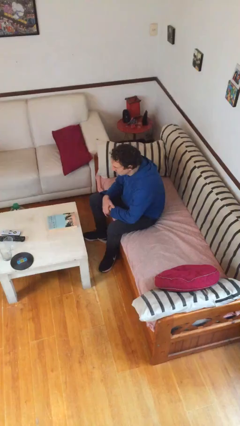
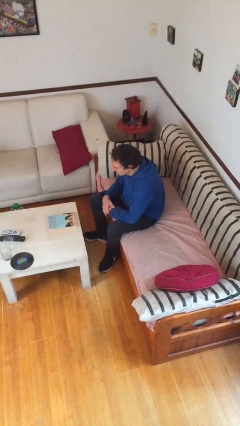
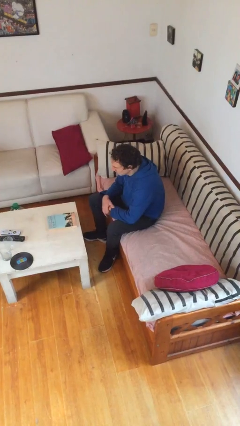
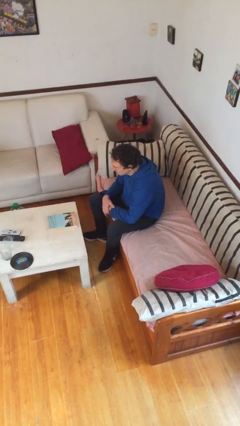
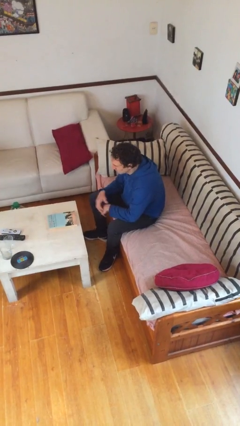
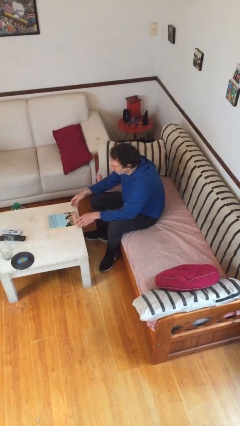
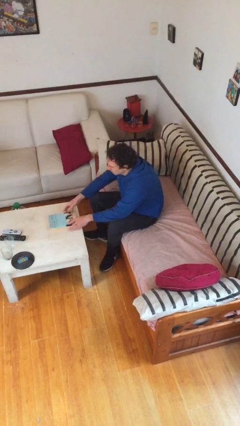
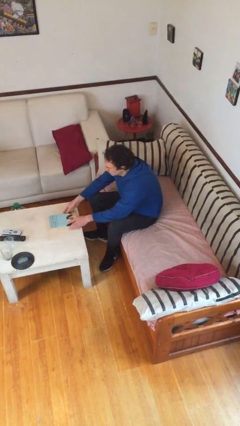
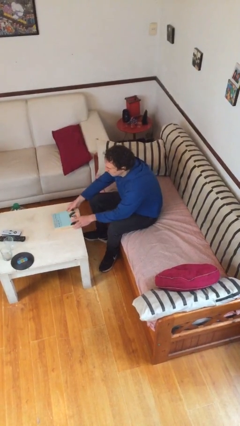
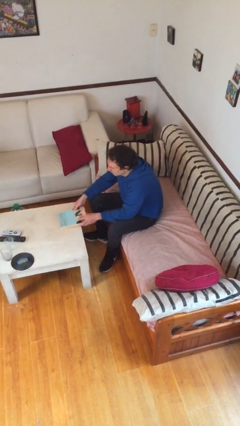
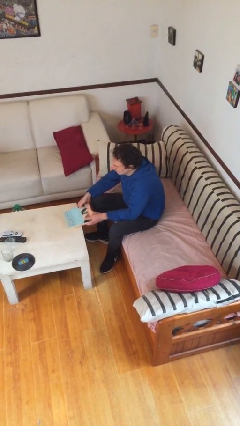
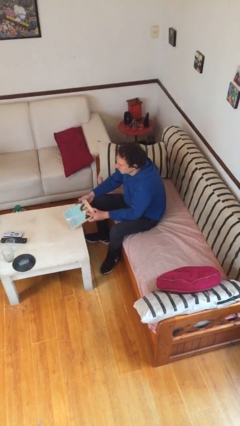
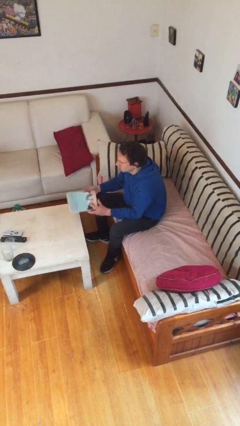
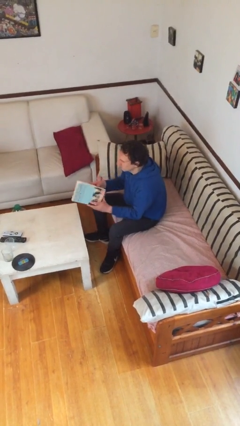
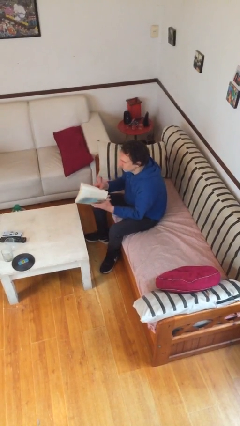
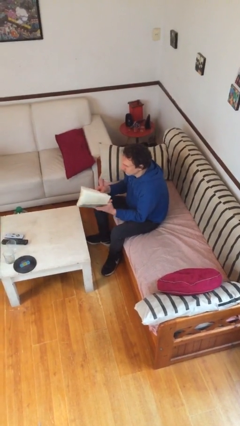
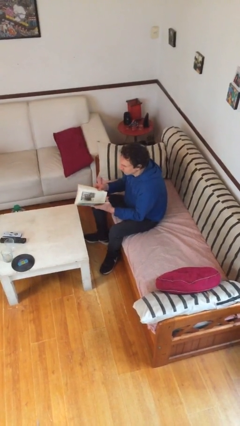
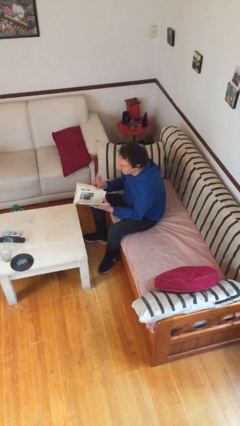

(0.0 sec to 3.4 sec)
person picks up object from table

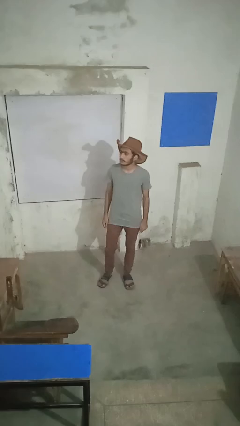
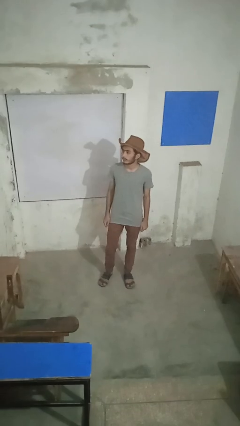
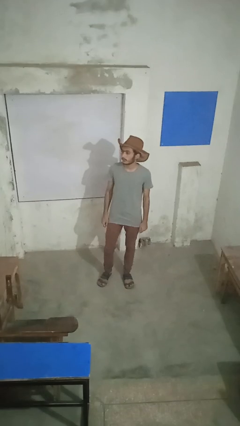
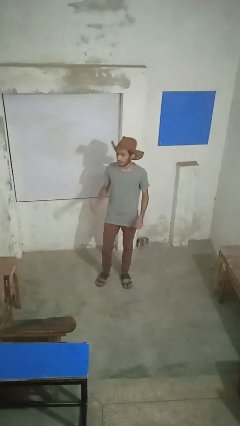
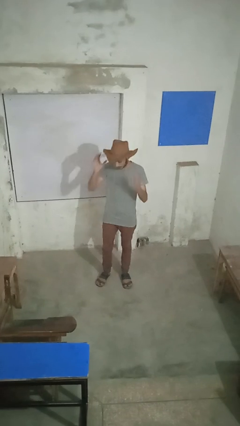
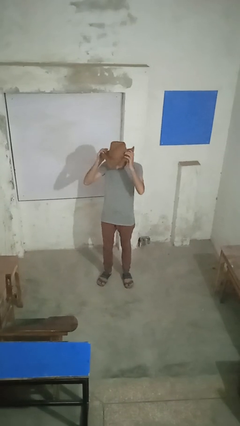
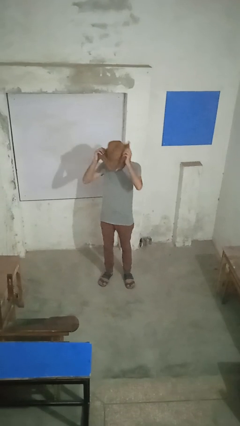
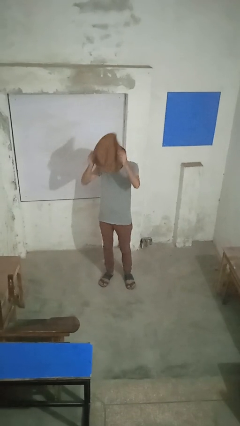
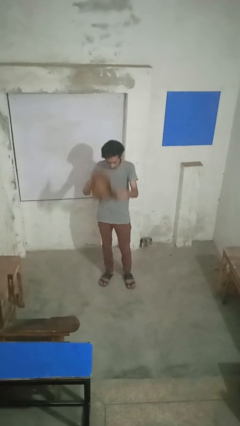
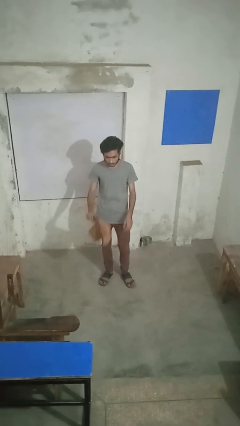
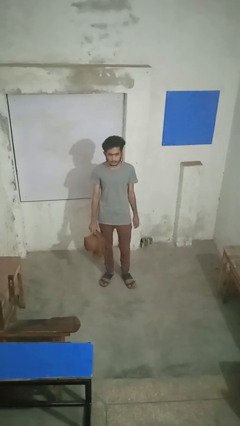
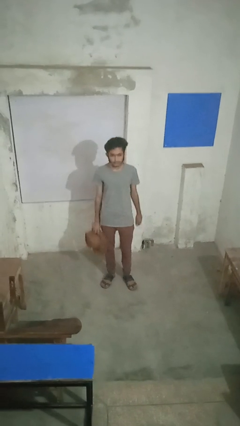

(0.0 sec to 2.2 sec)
person takes off hat

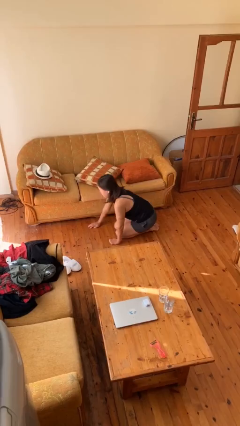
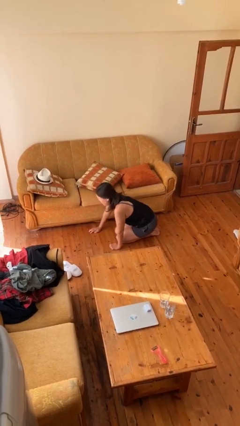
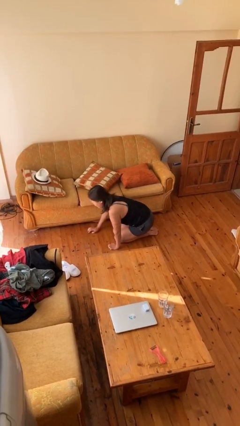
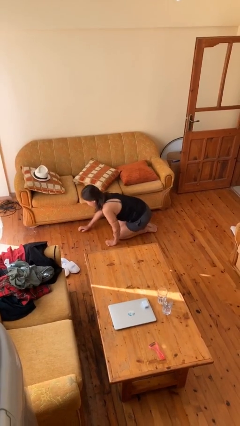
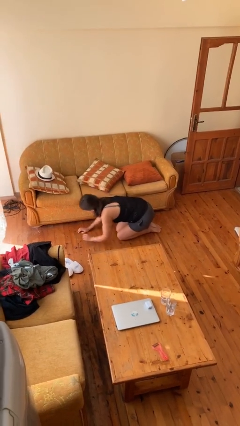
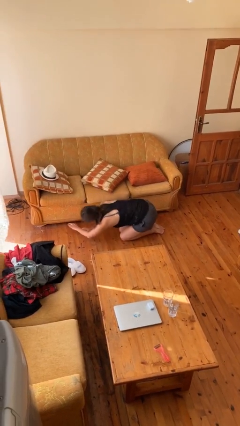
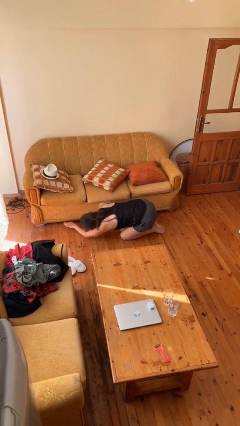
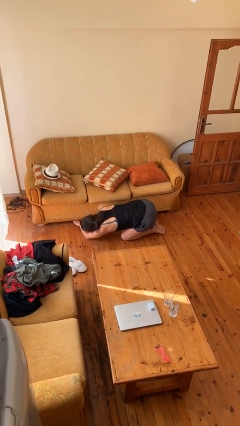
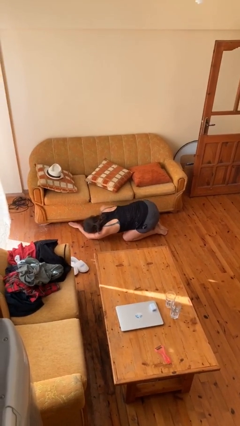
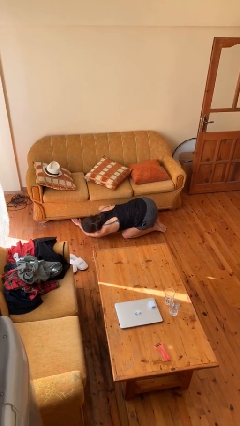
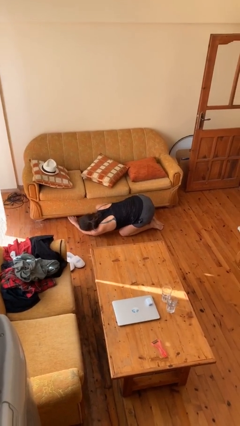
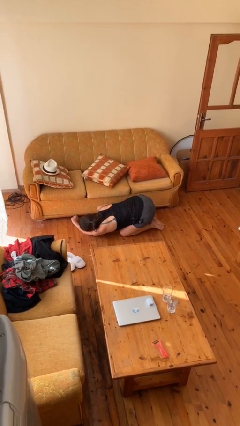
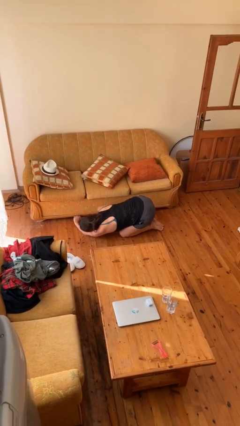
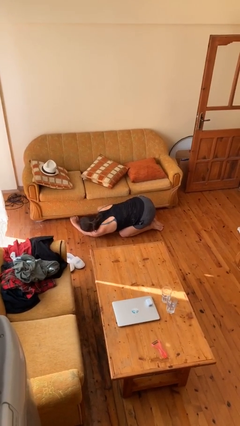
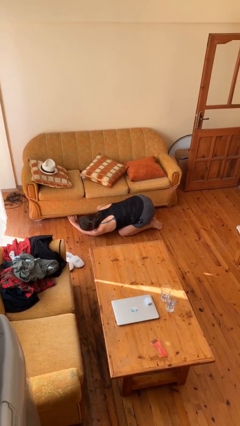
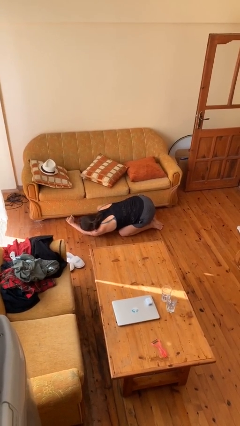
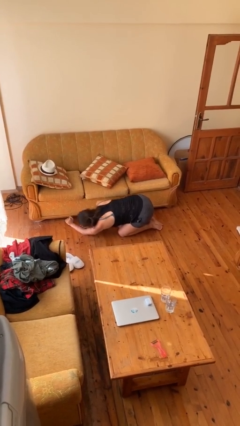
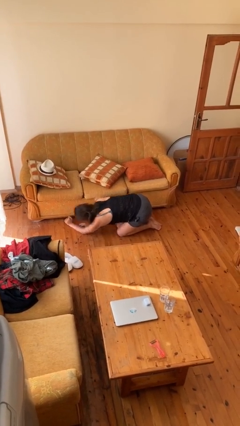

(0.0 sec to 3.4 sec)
person searches under couch

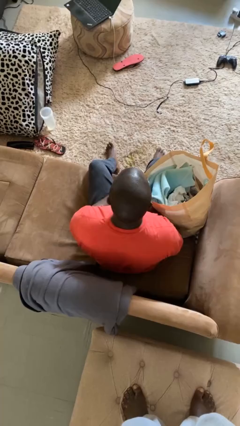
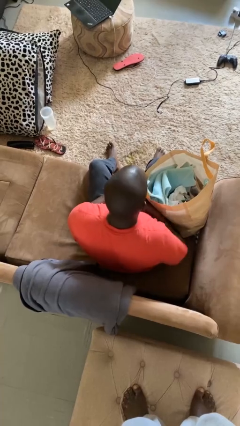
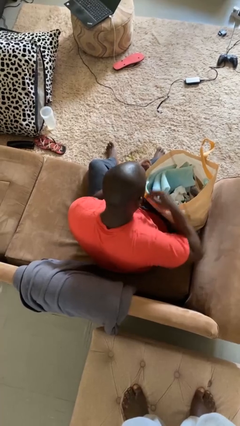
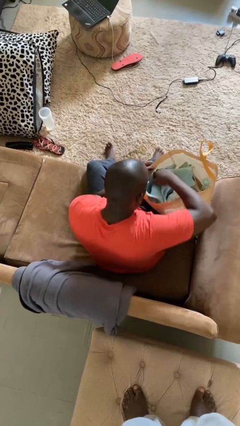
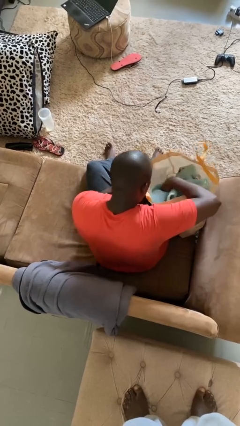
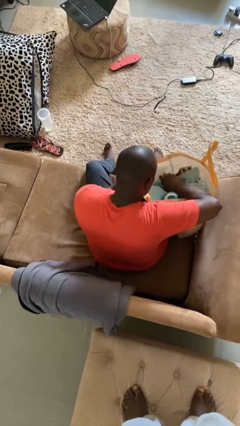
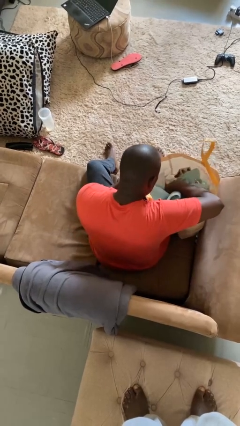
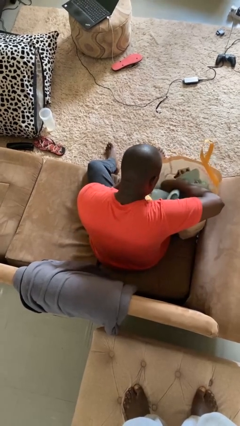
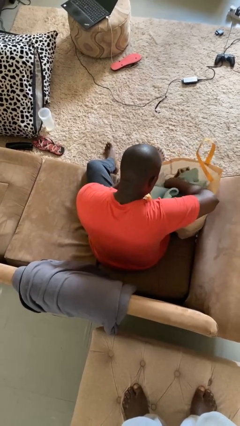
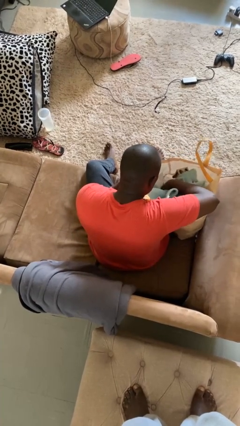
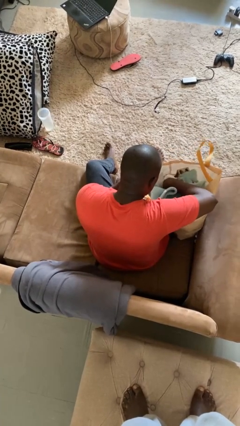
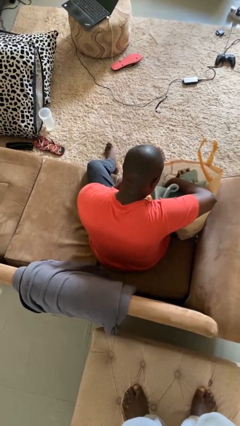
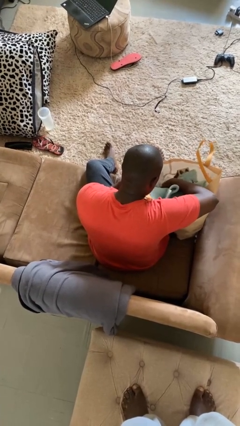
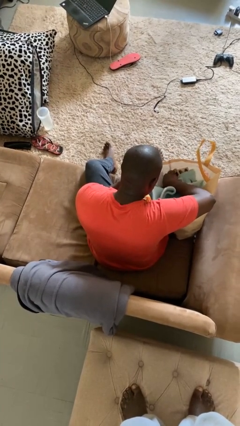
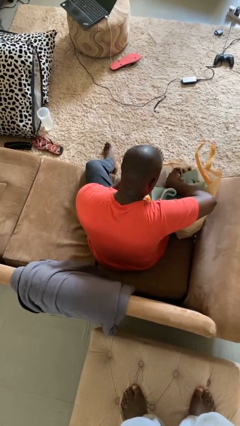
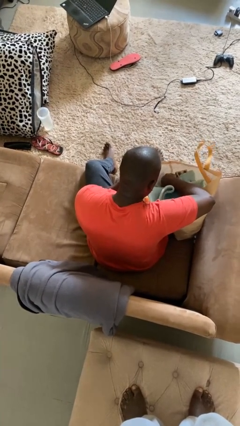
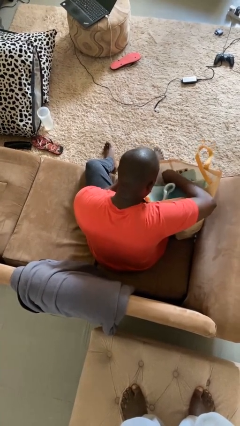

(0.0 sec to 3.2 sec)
person searches in bag

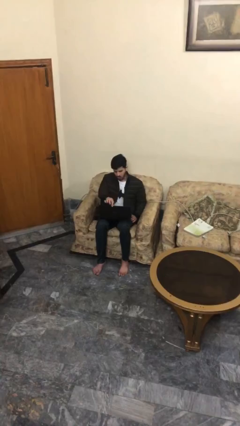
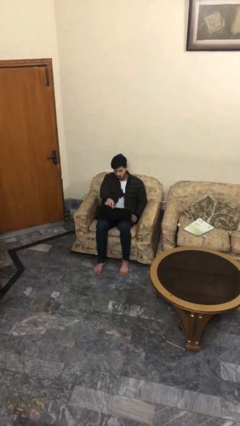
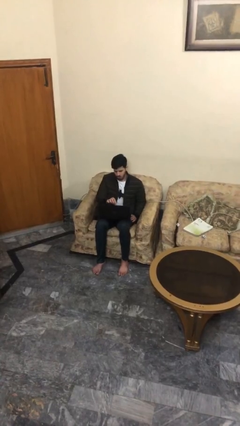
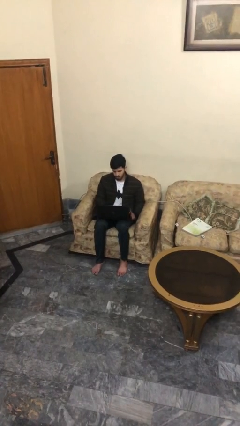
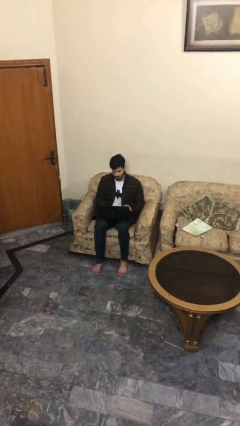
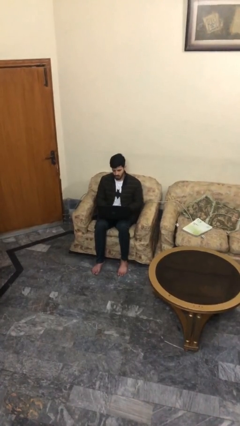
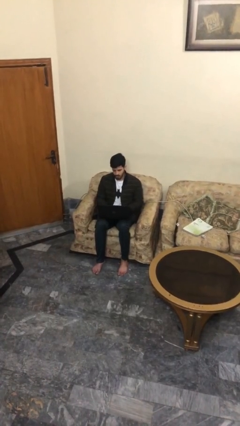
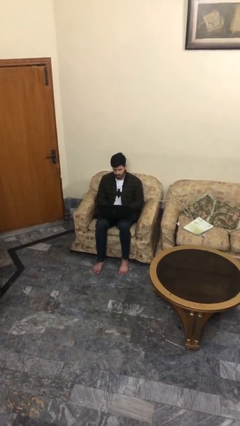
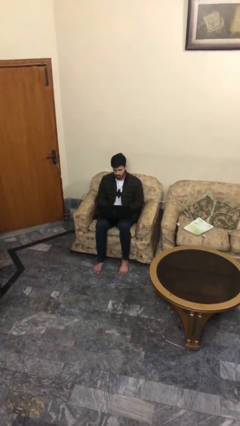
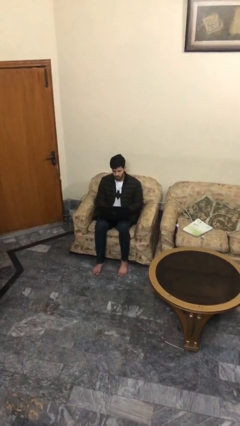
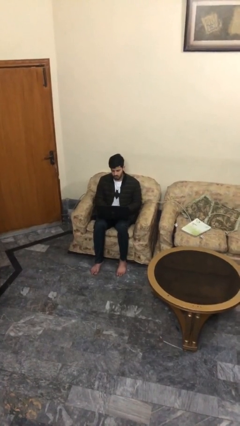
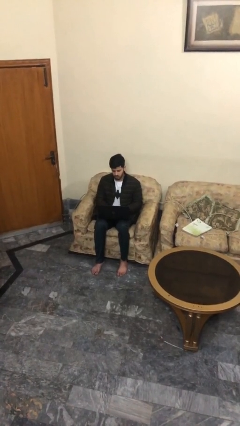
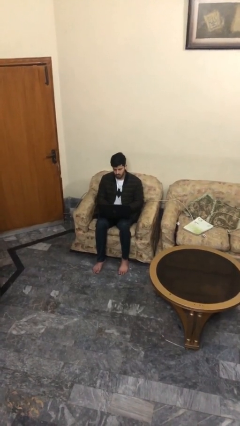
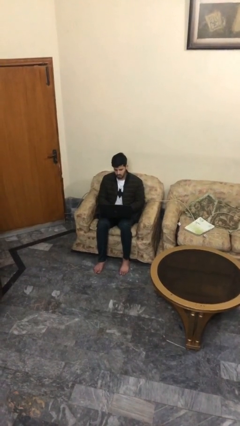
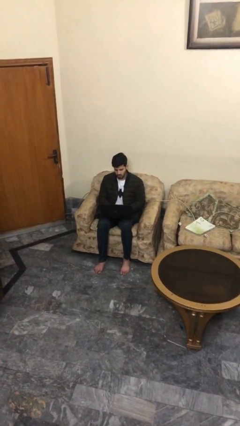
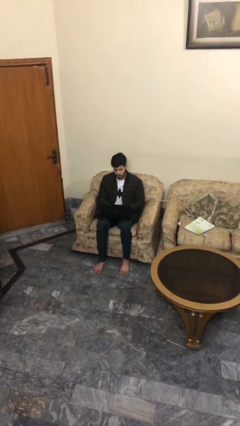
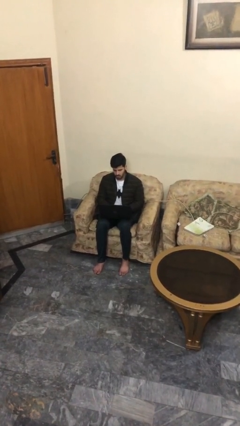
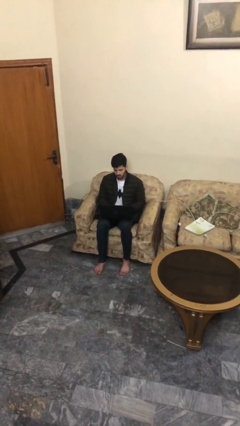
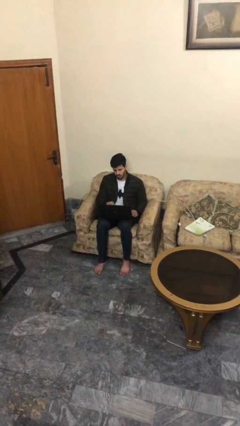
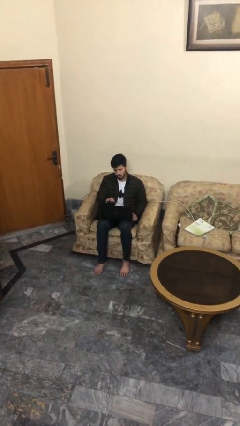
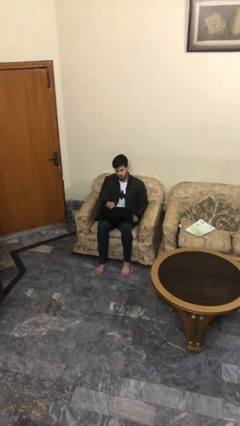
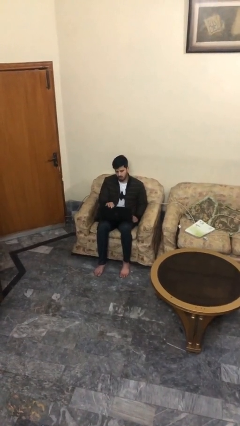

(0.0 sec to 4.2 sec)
person interacts with laptop

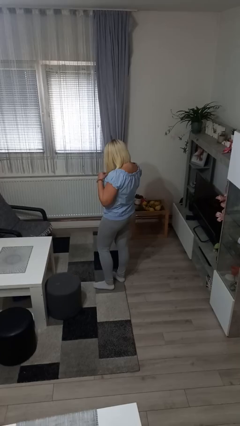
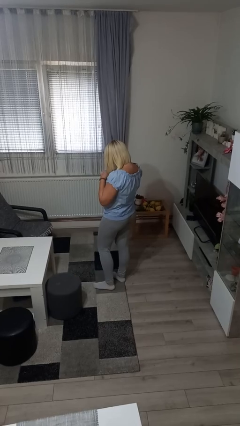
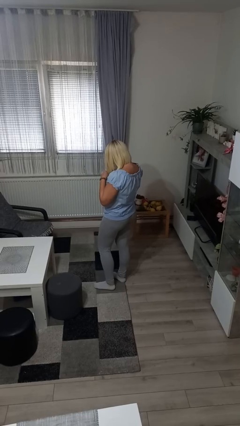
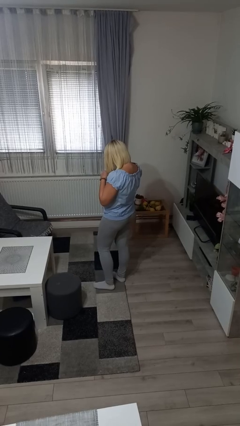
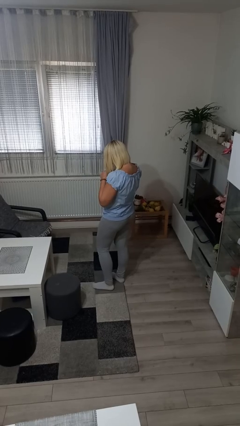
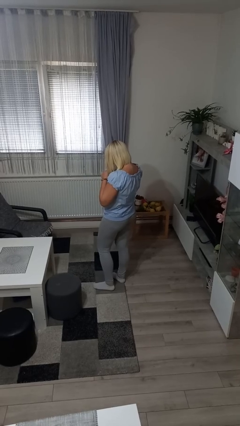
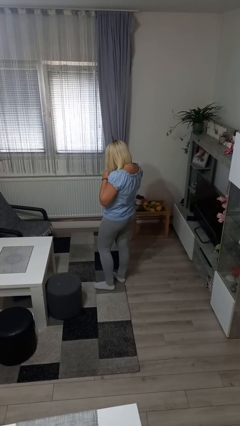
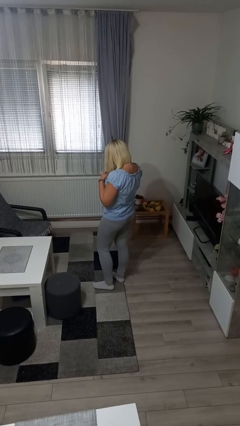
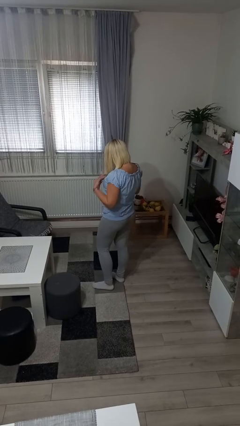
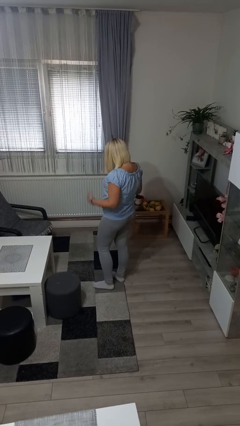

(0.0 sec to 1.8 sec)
person buttons shirt
